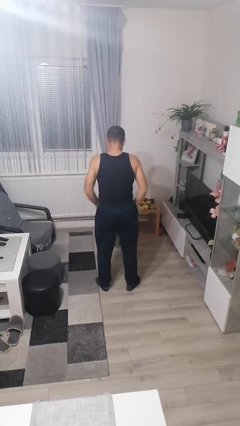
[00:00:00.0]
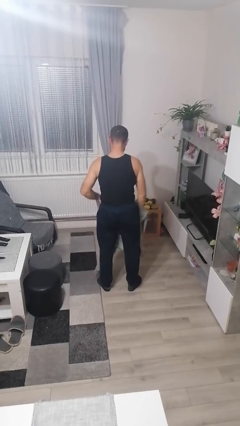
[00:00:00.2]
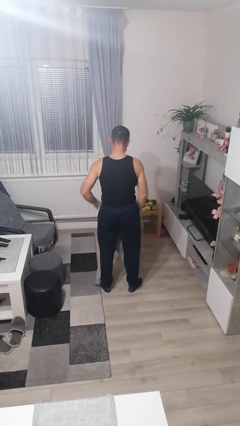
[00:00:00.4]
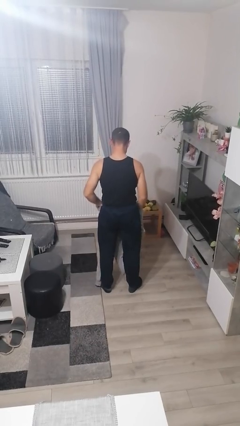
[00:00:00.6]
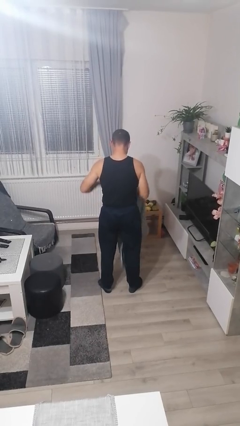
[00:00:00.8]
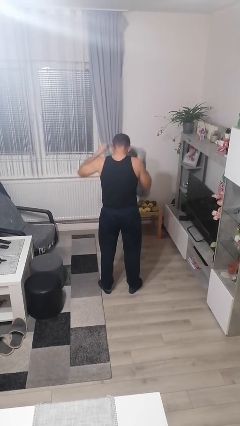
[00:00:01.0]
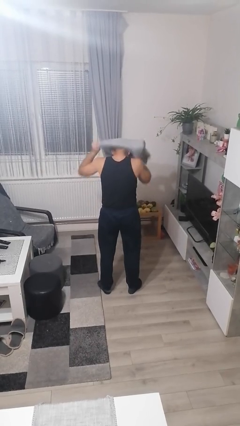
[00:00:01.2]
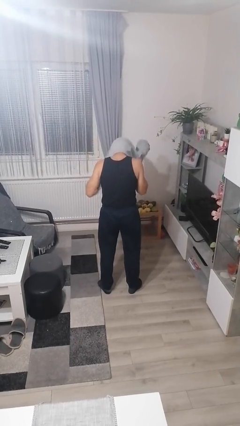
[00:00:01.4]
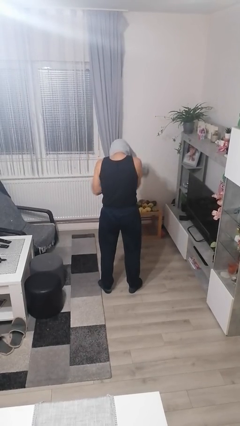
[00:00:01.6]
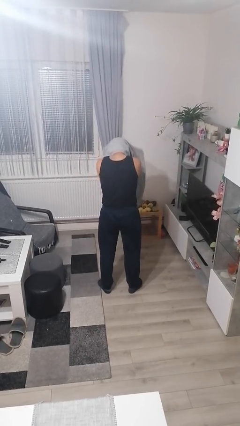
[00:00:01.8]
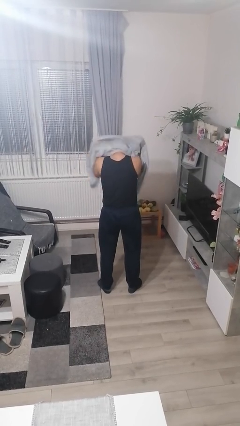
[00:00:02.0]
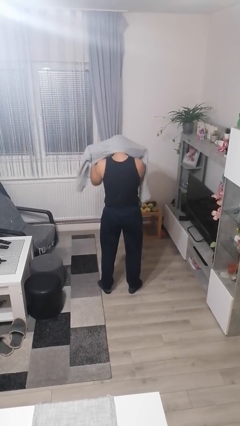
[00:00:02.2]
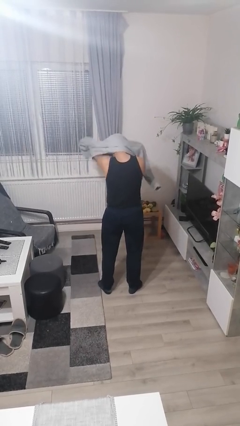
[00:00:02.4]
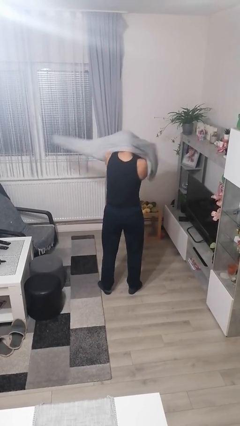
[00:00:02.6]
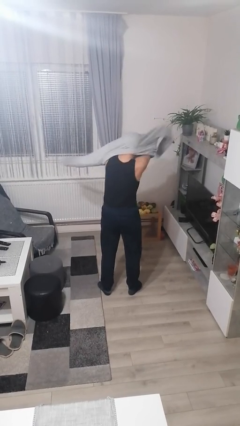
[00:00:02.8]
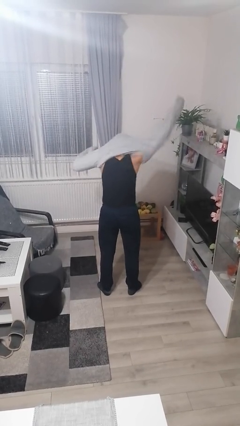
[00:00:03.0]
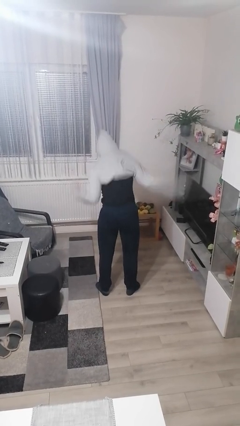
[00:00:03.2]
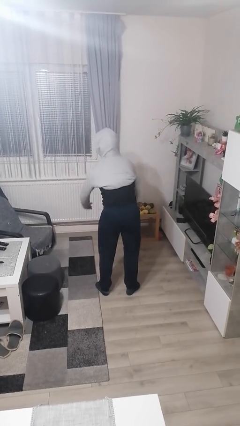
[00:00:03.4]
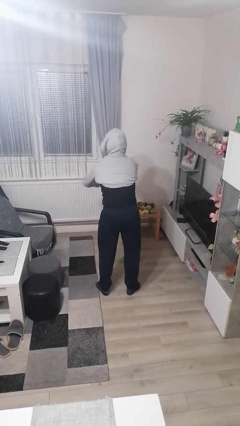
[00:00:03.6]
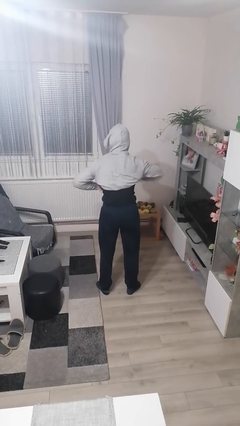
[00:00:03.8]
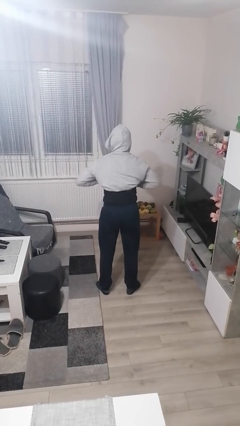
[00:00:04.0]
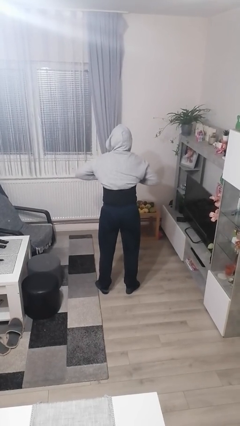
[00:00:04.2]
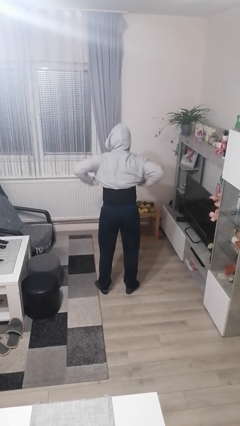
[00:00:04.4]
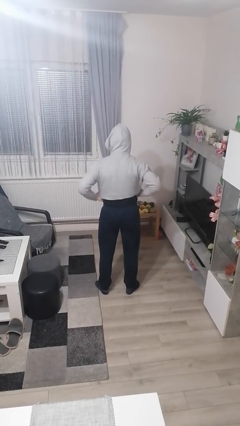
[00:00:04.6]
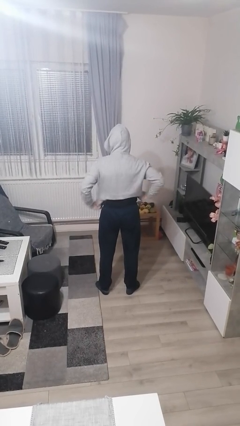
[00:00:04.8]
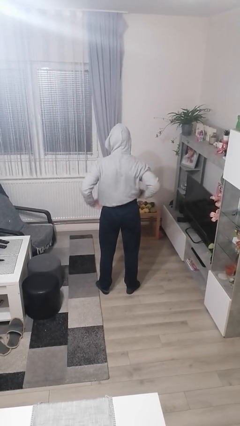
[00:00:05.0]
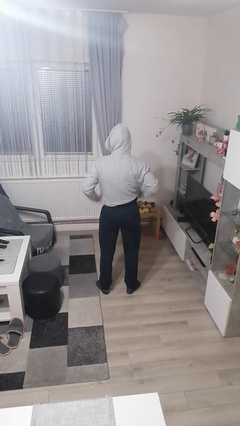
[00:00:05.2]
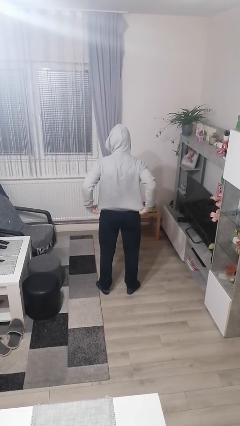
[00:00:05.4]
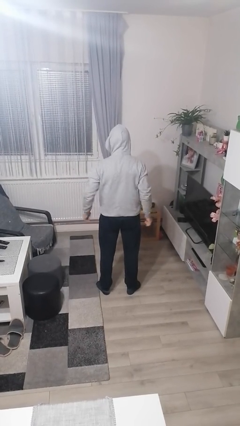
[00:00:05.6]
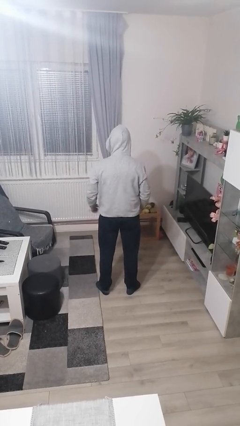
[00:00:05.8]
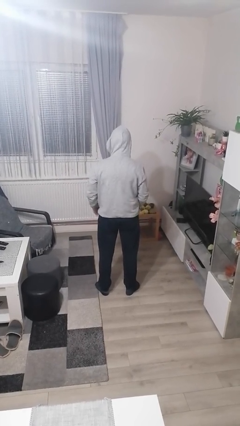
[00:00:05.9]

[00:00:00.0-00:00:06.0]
person puts on hoodie

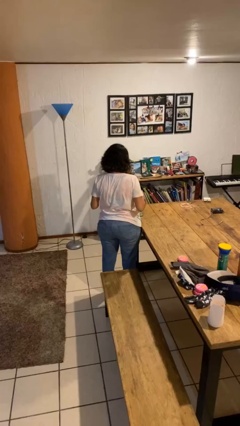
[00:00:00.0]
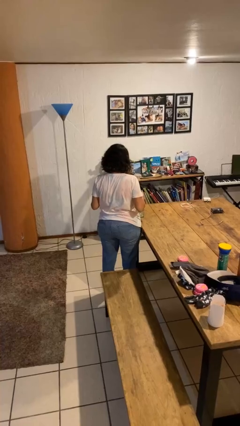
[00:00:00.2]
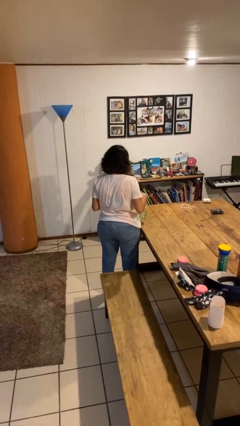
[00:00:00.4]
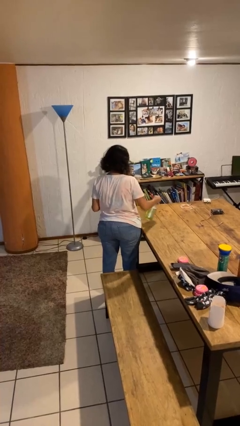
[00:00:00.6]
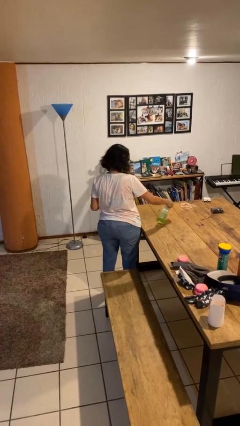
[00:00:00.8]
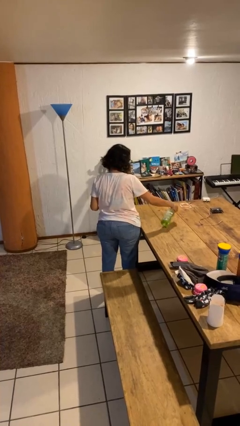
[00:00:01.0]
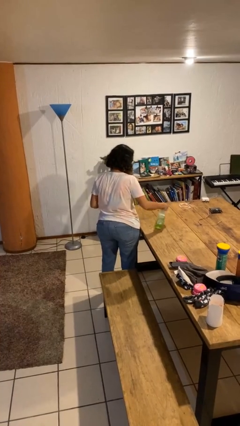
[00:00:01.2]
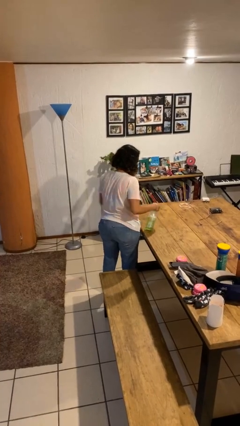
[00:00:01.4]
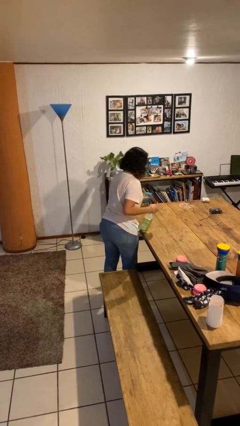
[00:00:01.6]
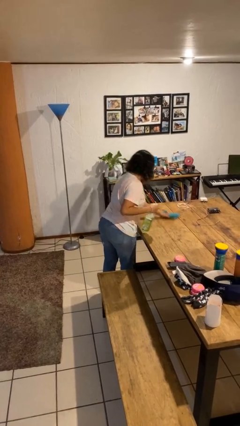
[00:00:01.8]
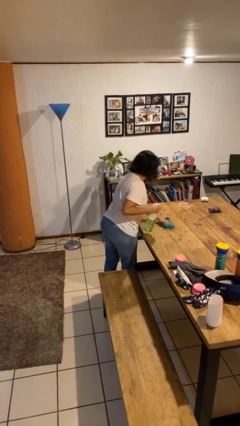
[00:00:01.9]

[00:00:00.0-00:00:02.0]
person sprays from bottle

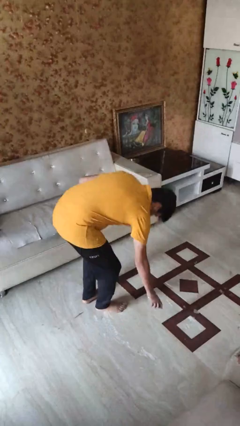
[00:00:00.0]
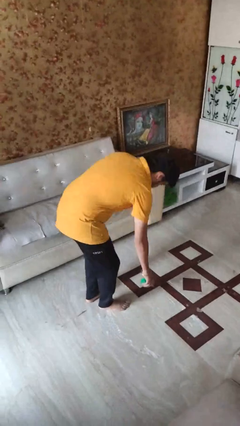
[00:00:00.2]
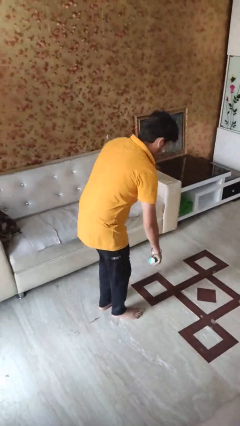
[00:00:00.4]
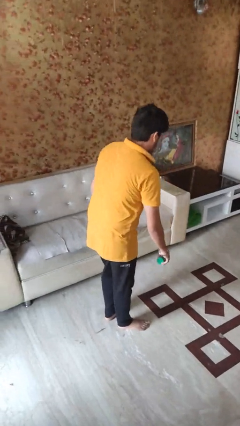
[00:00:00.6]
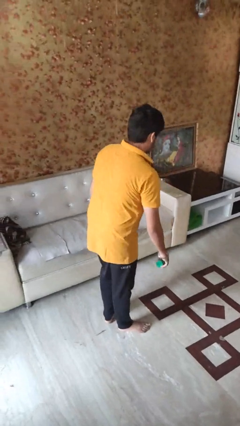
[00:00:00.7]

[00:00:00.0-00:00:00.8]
person picks up object from bed

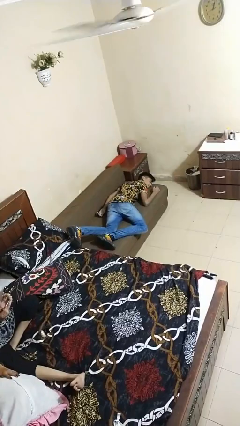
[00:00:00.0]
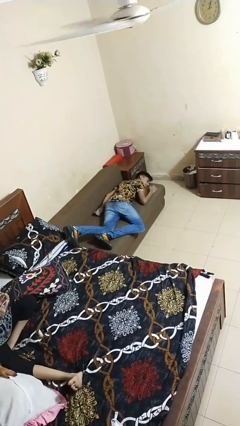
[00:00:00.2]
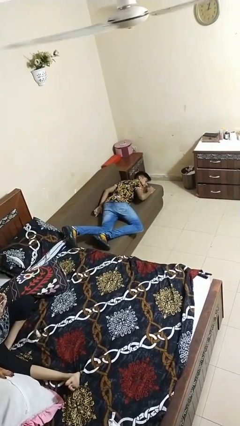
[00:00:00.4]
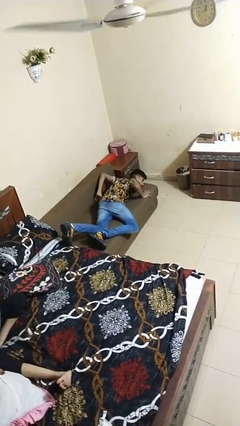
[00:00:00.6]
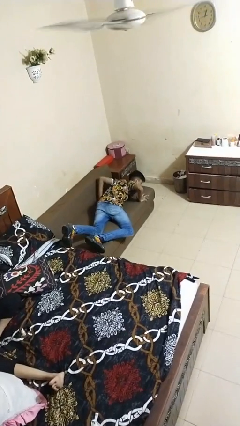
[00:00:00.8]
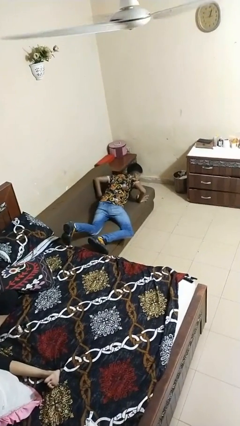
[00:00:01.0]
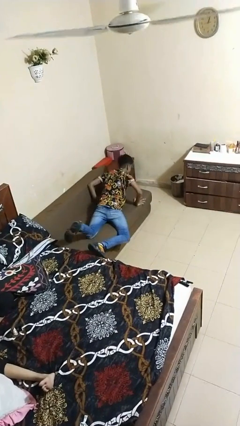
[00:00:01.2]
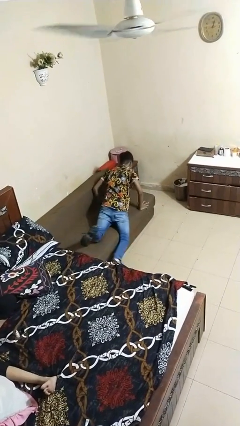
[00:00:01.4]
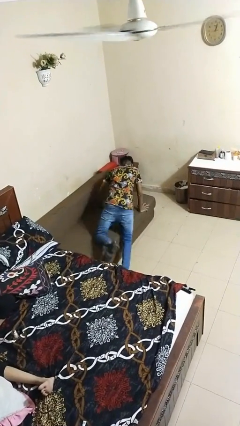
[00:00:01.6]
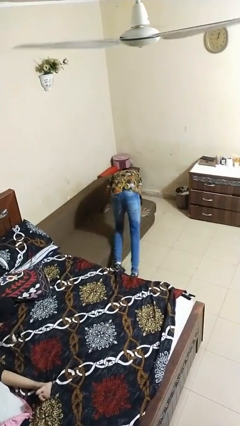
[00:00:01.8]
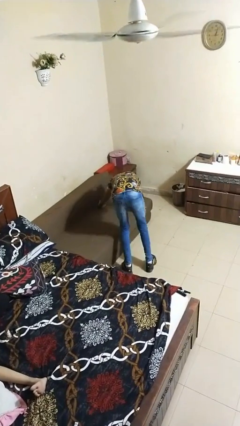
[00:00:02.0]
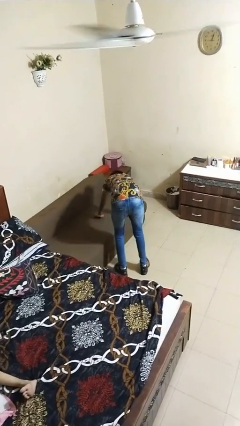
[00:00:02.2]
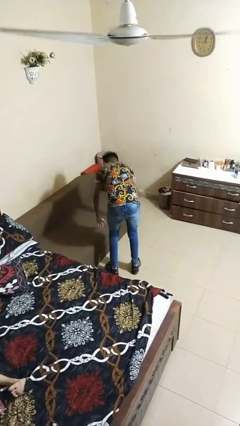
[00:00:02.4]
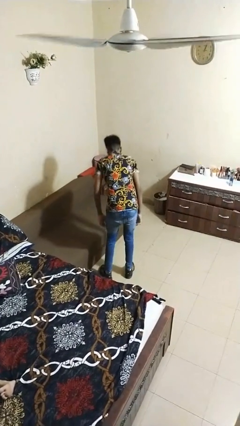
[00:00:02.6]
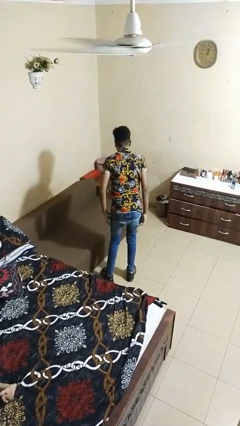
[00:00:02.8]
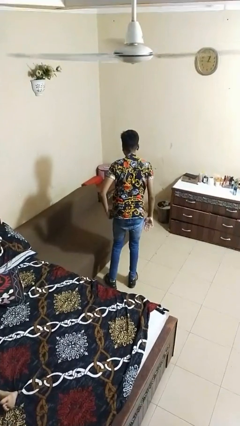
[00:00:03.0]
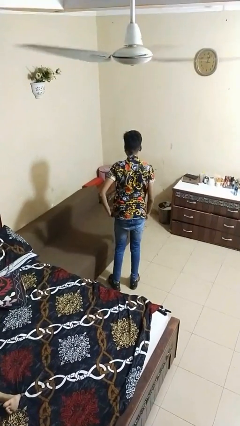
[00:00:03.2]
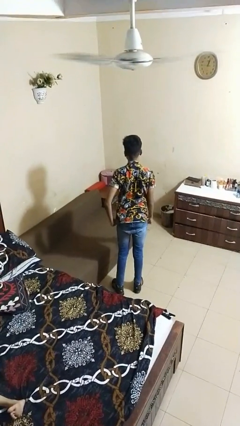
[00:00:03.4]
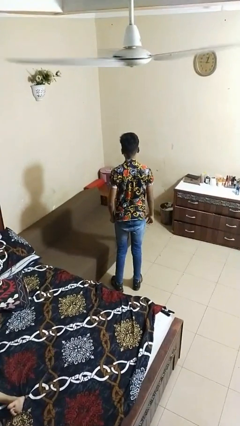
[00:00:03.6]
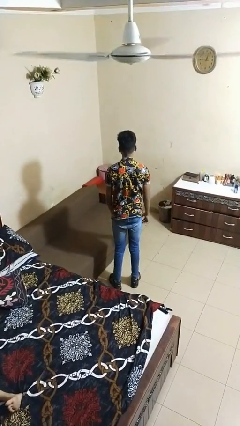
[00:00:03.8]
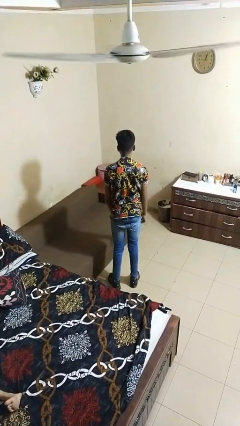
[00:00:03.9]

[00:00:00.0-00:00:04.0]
person stands up

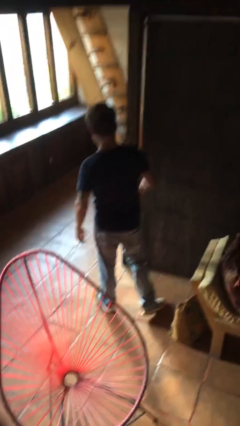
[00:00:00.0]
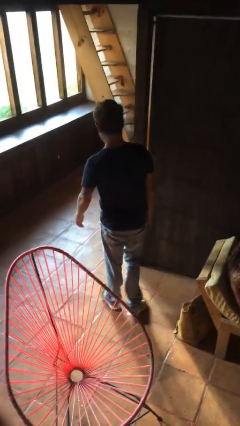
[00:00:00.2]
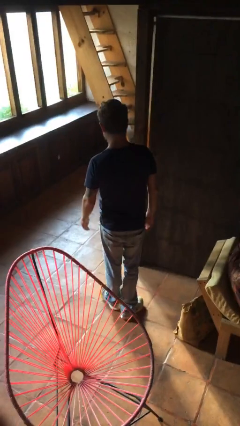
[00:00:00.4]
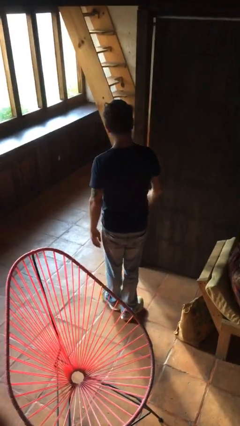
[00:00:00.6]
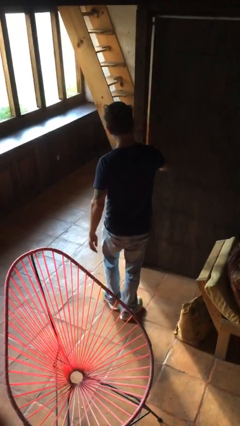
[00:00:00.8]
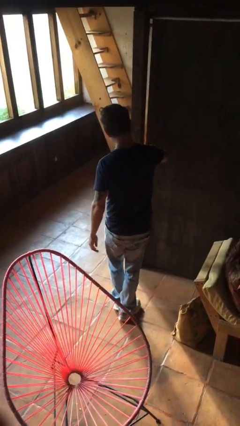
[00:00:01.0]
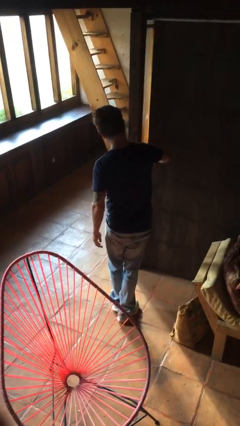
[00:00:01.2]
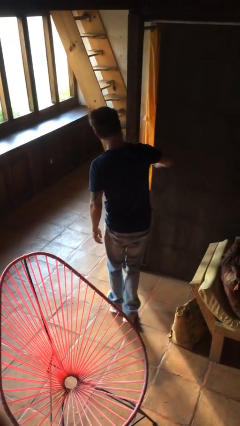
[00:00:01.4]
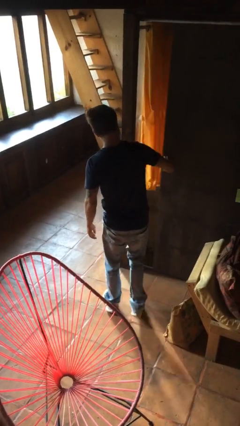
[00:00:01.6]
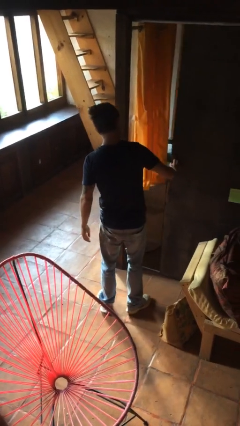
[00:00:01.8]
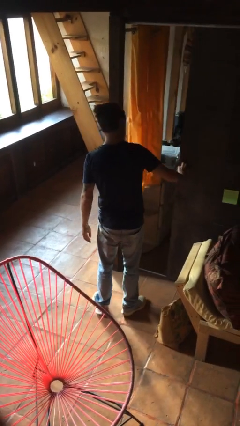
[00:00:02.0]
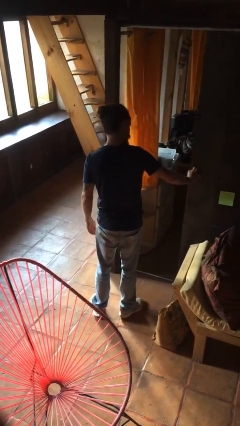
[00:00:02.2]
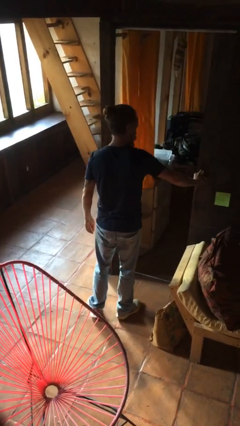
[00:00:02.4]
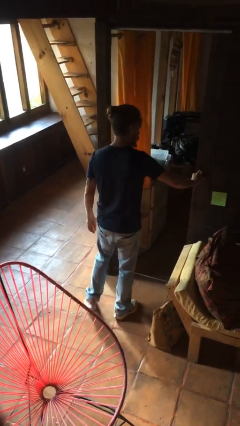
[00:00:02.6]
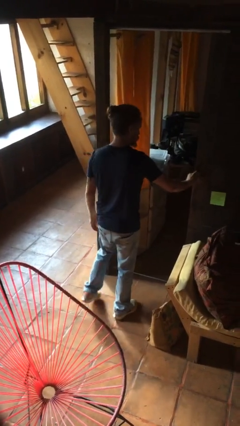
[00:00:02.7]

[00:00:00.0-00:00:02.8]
person opens sliding door

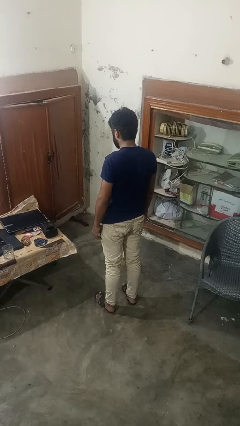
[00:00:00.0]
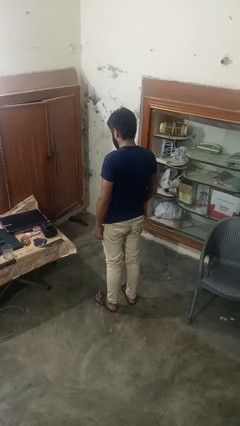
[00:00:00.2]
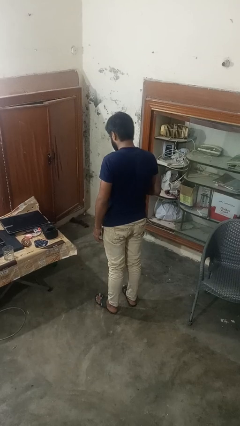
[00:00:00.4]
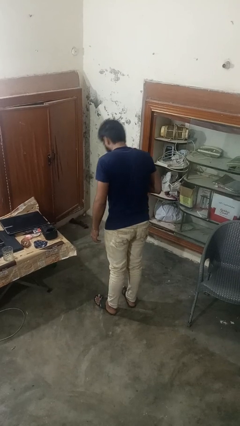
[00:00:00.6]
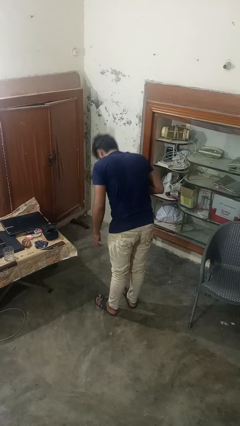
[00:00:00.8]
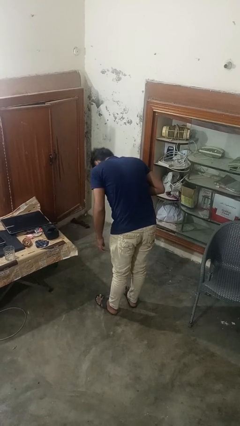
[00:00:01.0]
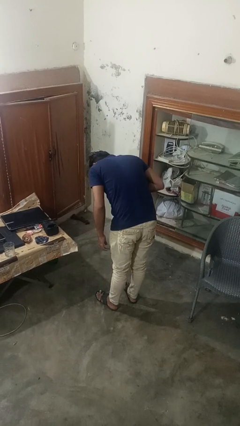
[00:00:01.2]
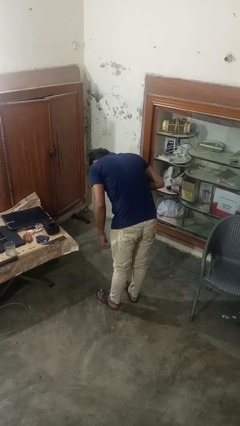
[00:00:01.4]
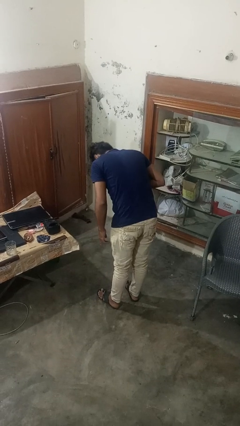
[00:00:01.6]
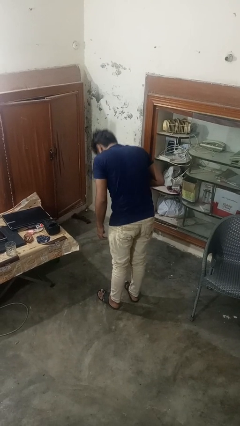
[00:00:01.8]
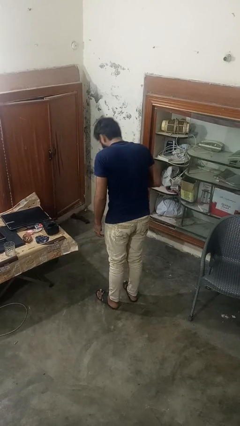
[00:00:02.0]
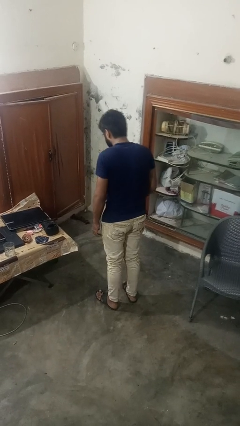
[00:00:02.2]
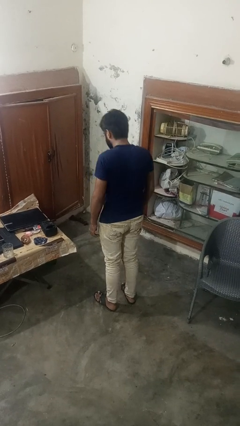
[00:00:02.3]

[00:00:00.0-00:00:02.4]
person bows
